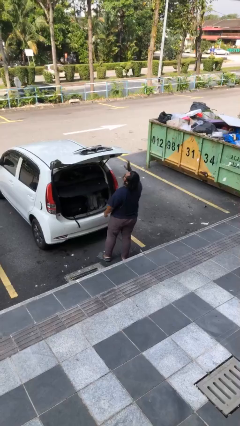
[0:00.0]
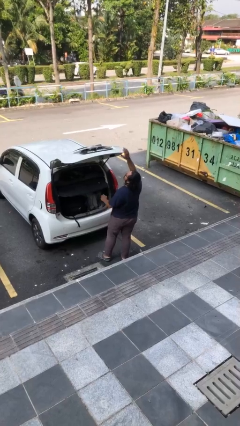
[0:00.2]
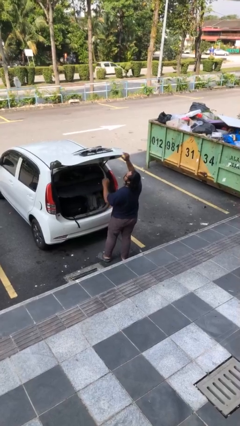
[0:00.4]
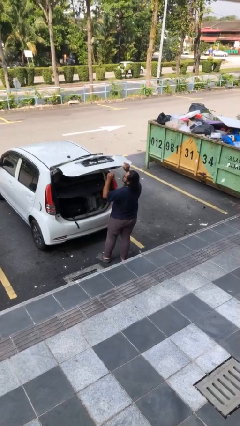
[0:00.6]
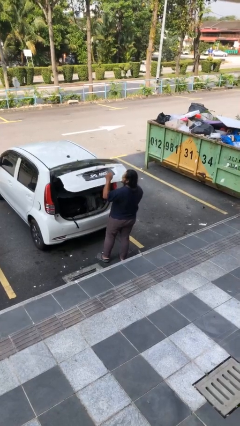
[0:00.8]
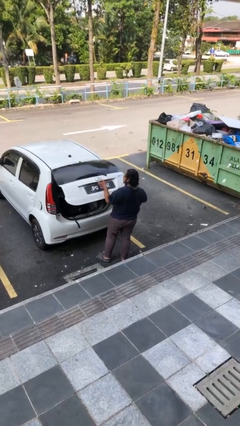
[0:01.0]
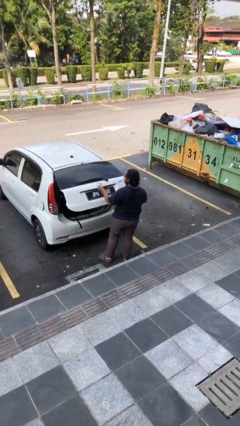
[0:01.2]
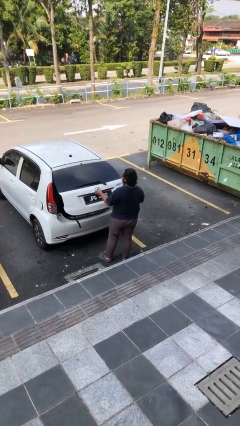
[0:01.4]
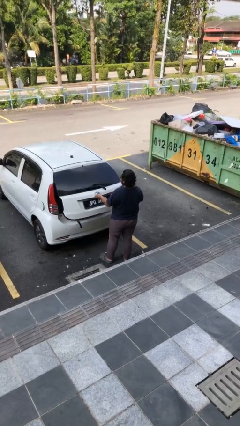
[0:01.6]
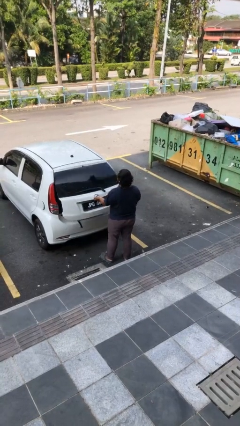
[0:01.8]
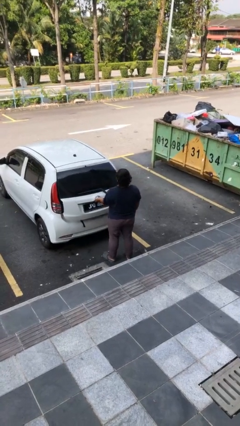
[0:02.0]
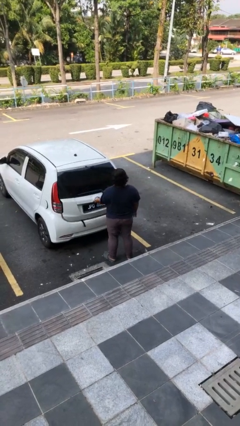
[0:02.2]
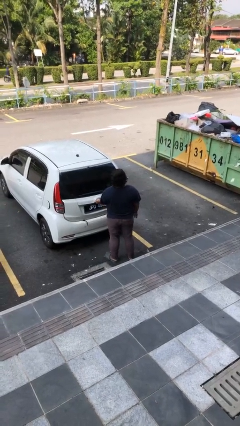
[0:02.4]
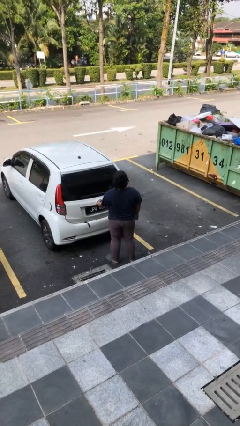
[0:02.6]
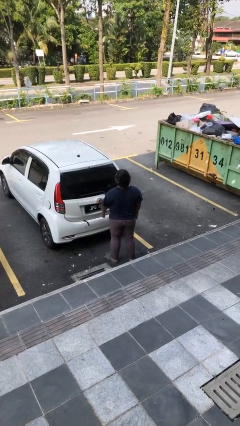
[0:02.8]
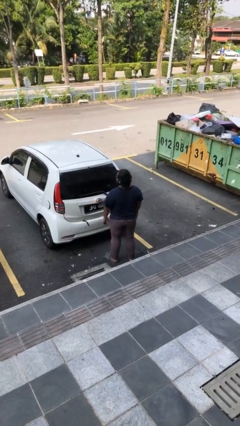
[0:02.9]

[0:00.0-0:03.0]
person closes car trunk

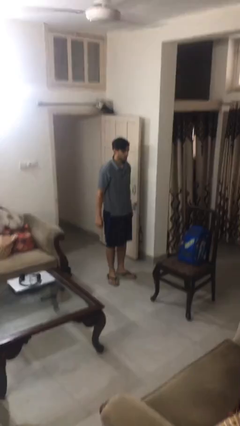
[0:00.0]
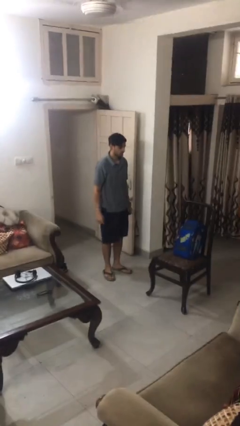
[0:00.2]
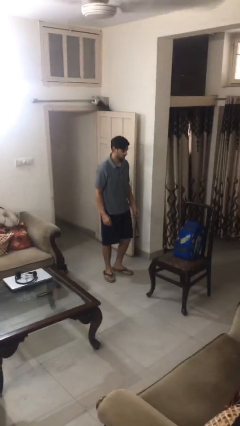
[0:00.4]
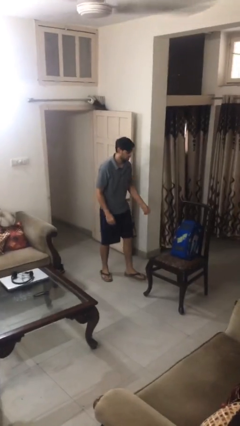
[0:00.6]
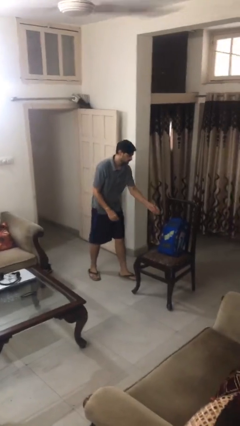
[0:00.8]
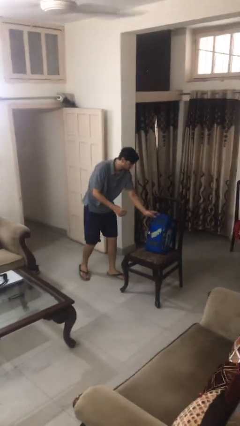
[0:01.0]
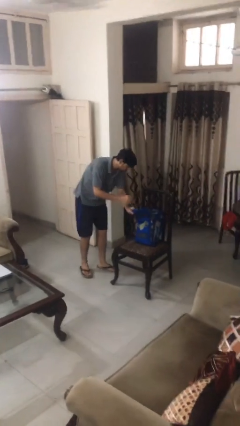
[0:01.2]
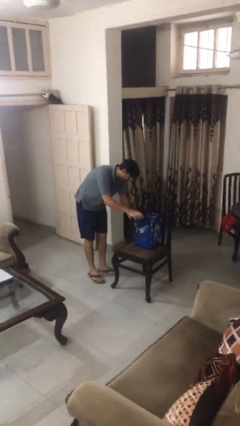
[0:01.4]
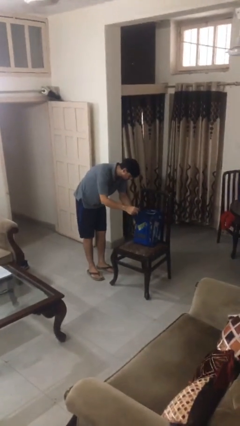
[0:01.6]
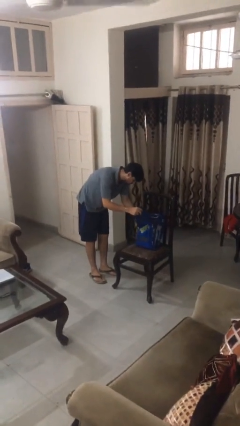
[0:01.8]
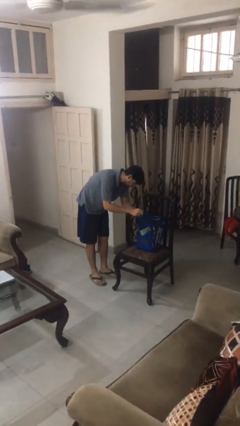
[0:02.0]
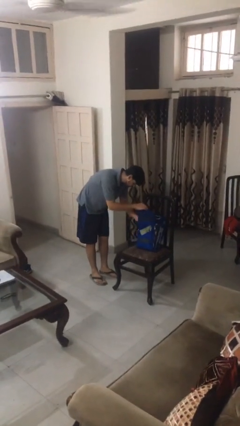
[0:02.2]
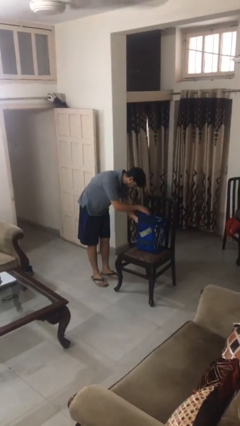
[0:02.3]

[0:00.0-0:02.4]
person searches in backpack

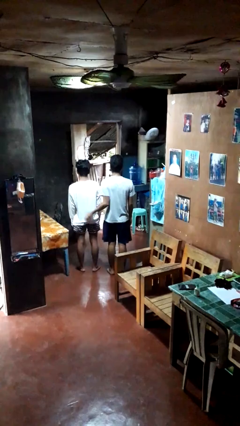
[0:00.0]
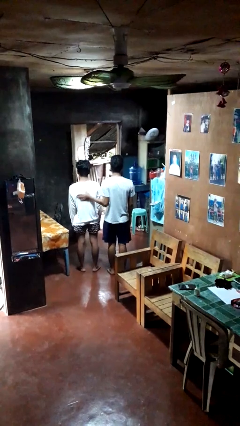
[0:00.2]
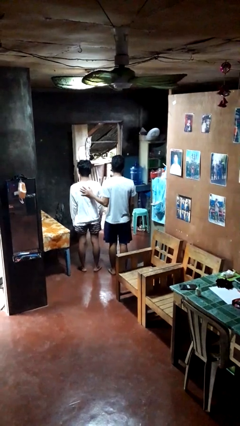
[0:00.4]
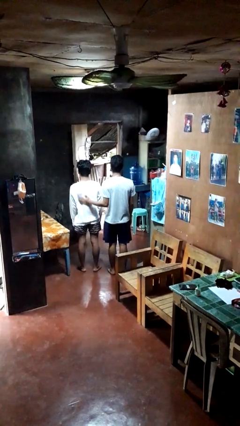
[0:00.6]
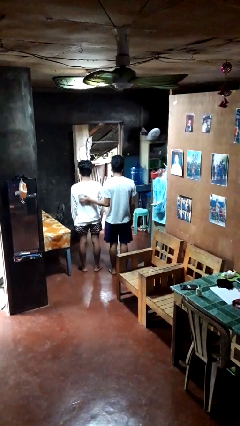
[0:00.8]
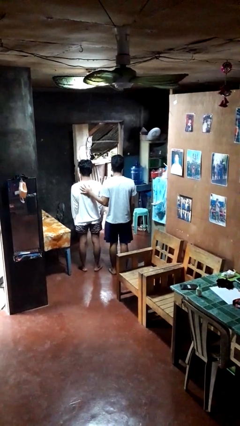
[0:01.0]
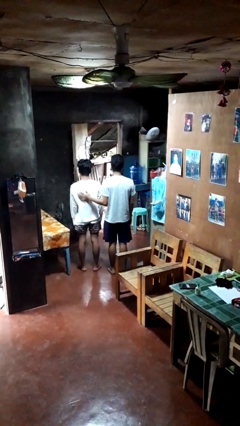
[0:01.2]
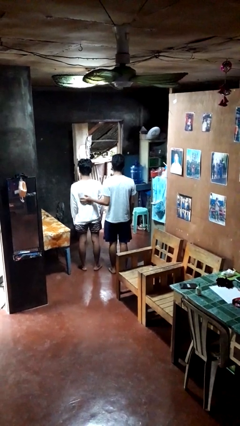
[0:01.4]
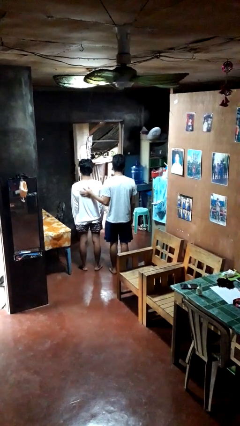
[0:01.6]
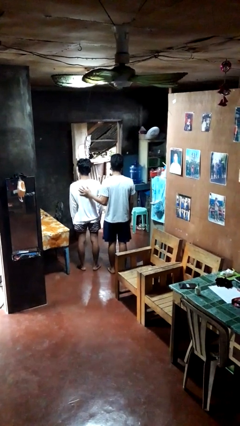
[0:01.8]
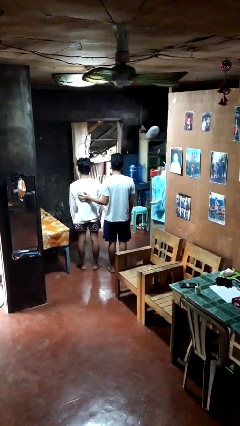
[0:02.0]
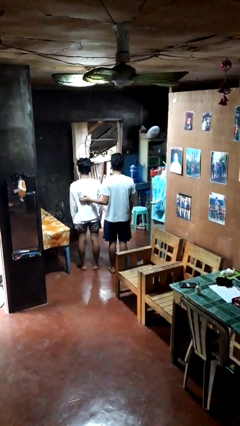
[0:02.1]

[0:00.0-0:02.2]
person touches back of person

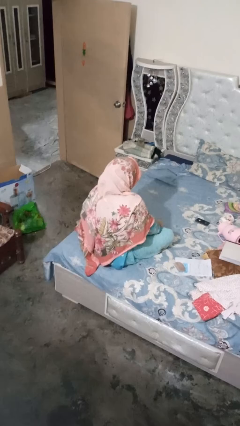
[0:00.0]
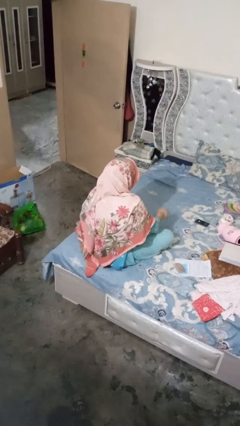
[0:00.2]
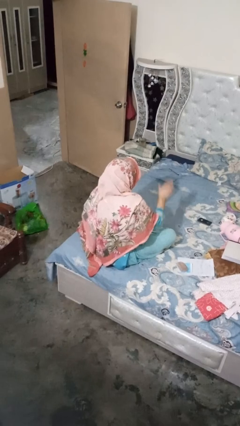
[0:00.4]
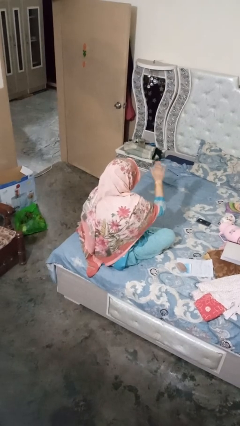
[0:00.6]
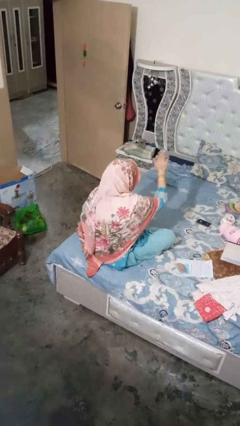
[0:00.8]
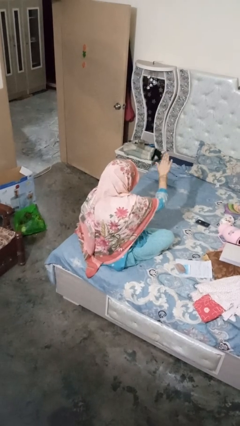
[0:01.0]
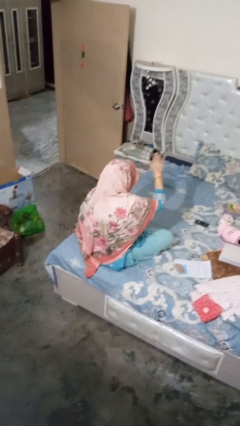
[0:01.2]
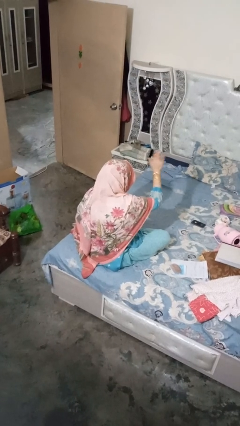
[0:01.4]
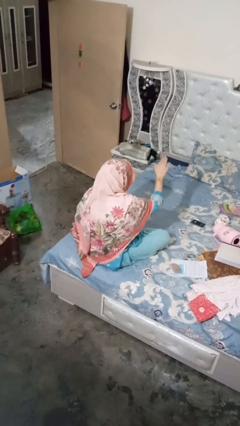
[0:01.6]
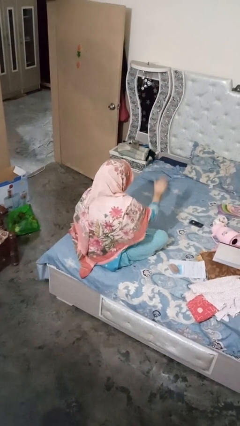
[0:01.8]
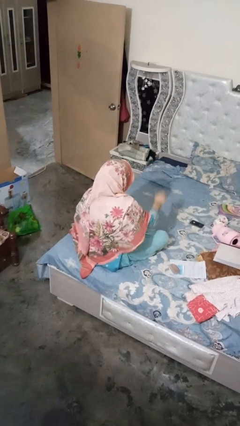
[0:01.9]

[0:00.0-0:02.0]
person gestures stop

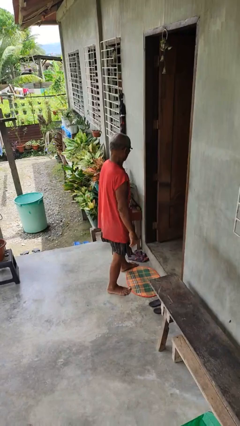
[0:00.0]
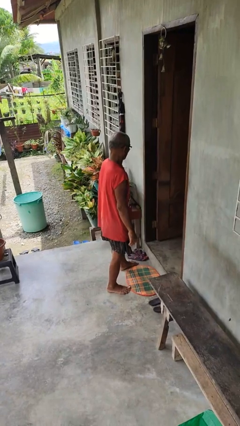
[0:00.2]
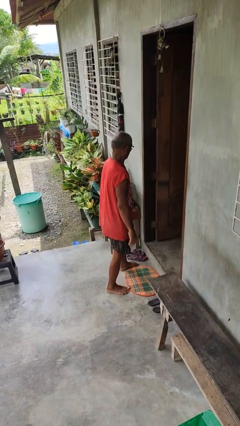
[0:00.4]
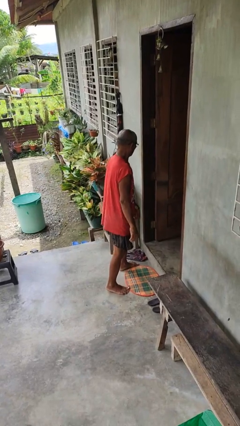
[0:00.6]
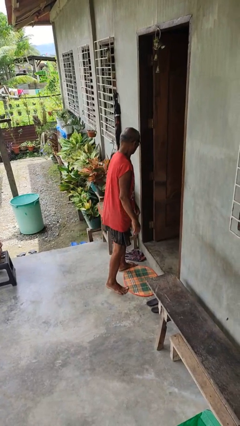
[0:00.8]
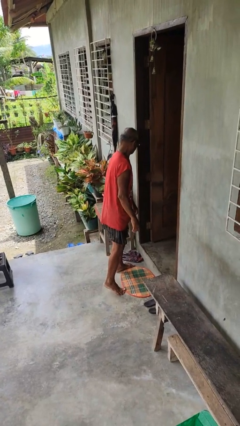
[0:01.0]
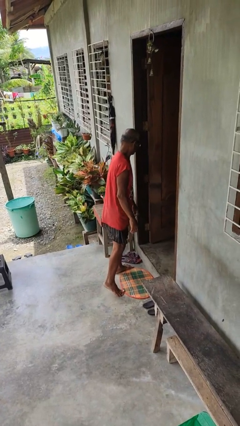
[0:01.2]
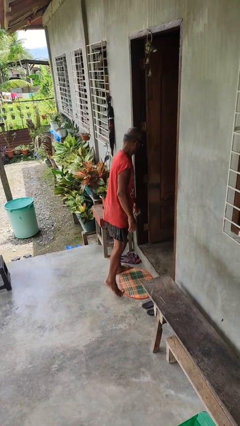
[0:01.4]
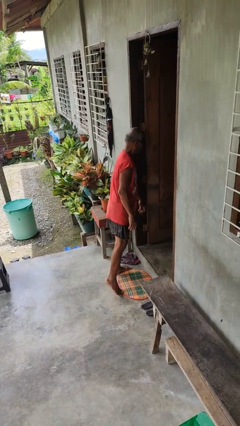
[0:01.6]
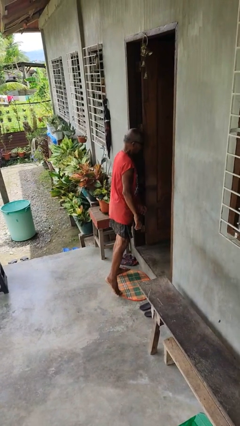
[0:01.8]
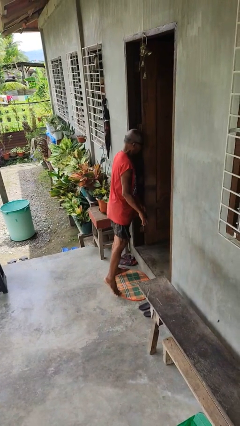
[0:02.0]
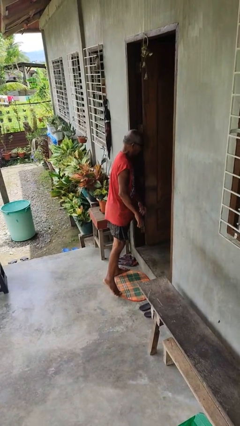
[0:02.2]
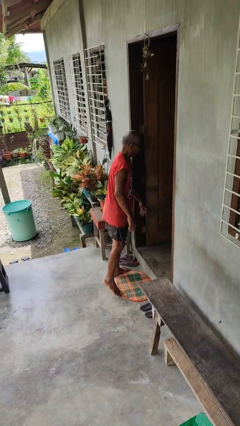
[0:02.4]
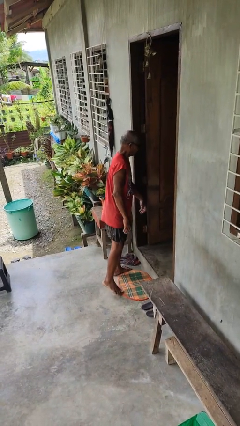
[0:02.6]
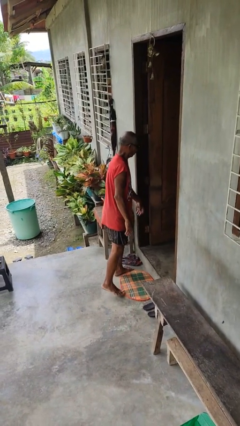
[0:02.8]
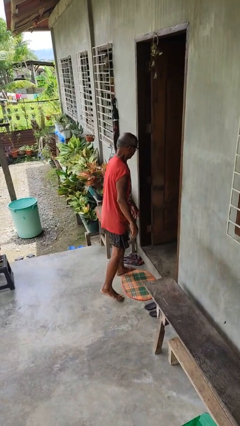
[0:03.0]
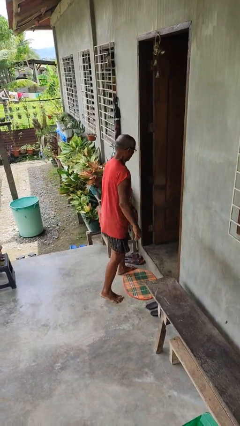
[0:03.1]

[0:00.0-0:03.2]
person bumps into wall

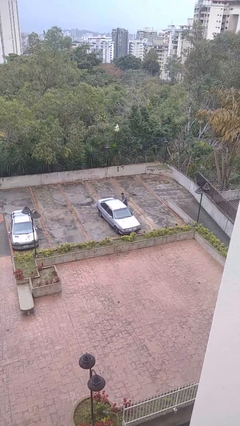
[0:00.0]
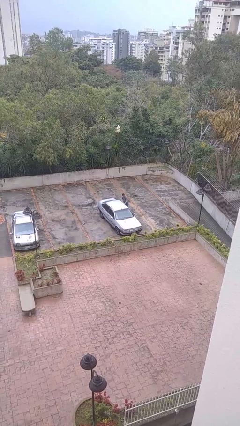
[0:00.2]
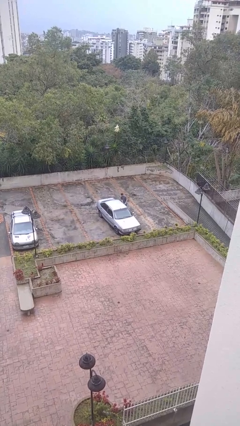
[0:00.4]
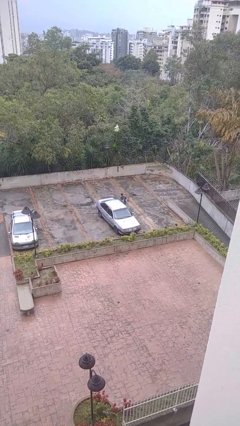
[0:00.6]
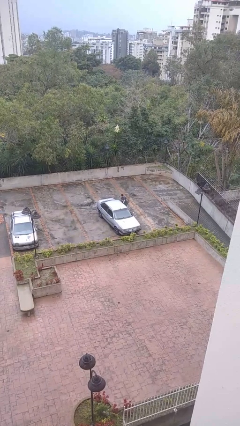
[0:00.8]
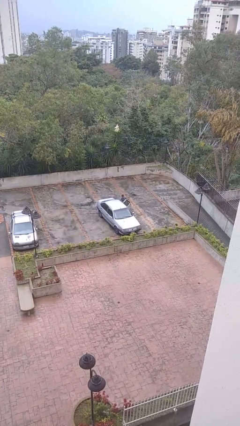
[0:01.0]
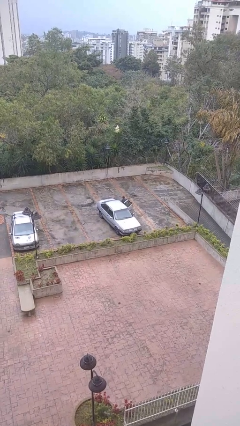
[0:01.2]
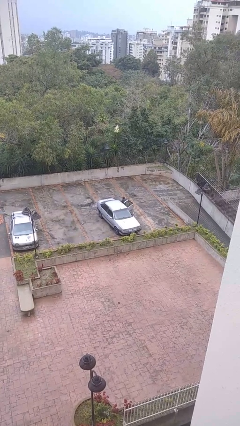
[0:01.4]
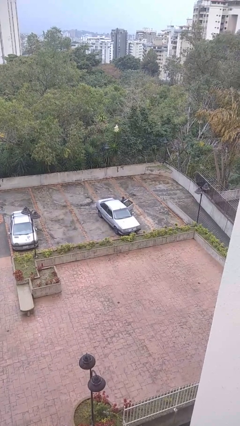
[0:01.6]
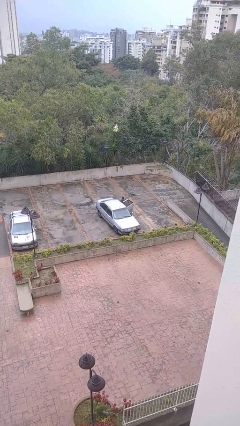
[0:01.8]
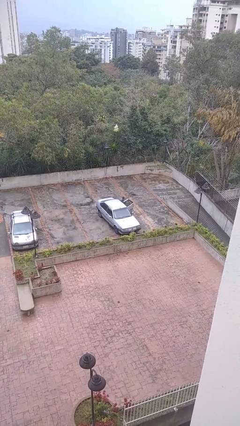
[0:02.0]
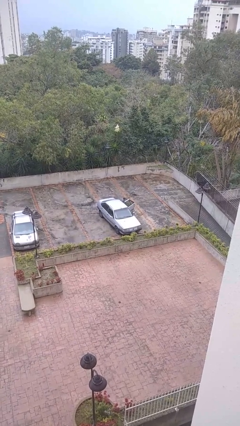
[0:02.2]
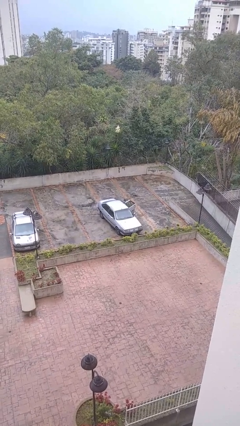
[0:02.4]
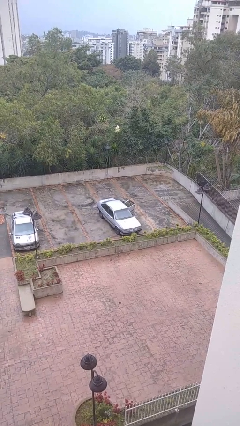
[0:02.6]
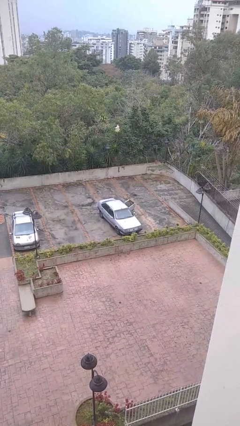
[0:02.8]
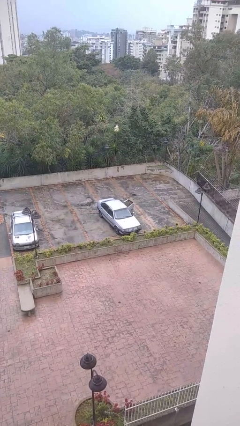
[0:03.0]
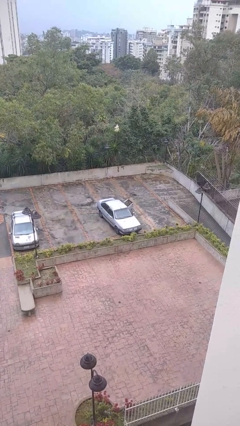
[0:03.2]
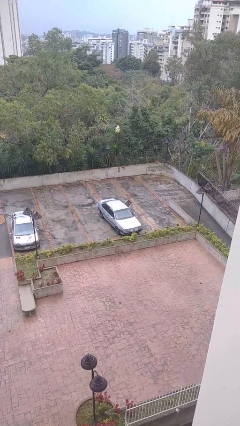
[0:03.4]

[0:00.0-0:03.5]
car picks up person

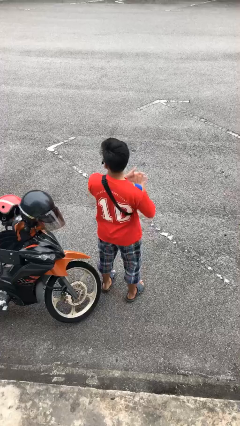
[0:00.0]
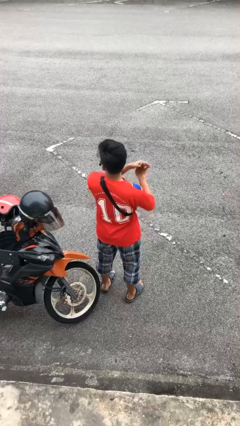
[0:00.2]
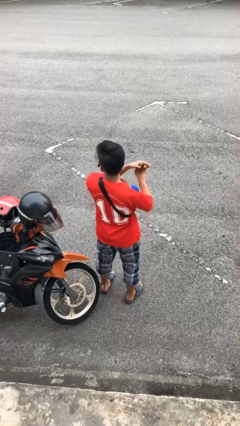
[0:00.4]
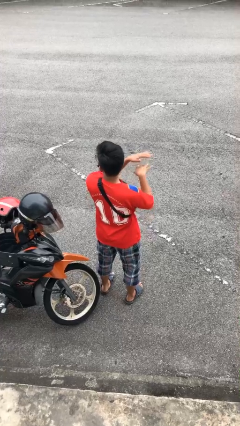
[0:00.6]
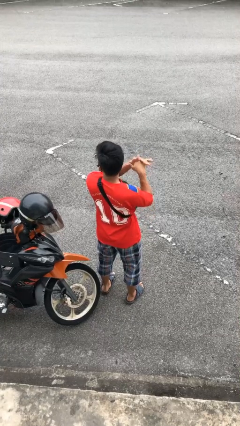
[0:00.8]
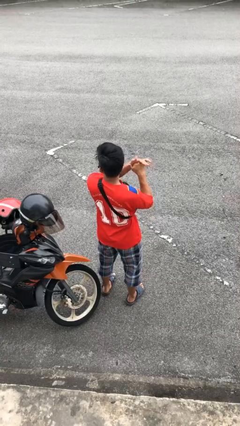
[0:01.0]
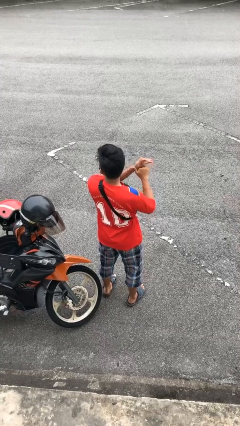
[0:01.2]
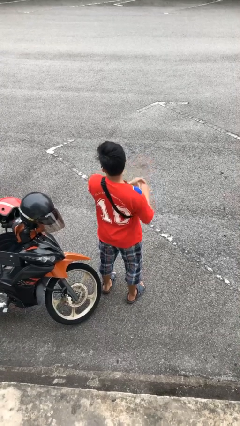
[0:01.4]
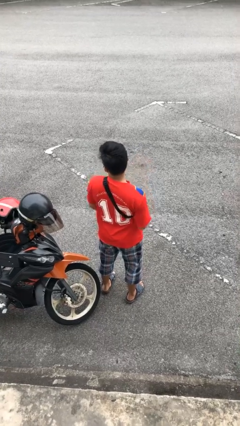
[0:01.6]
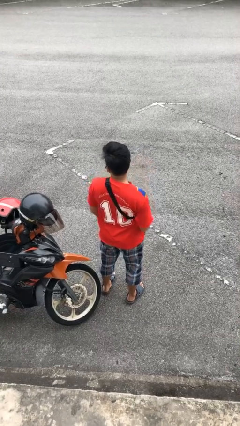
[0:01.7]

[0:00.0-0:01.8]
person cracks knuckles
